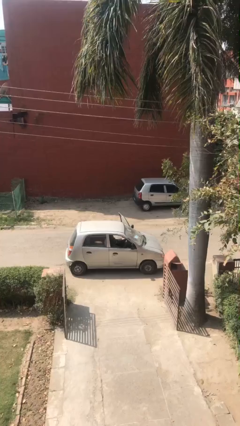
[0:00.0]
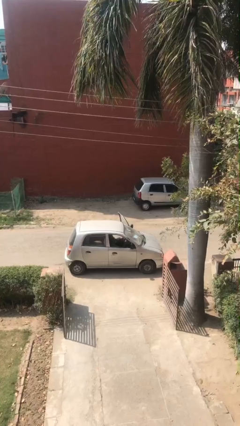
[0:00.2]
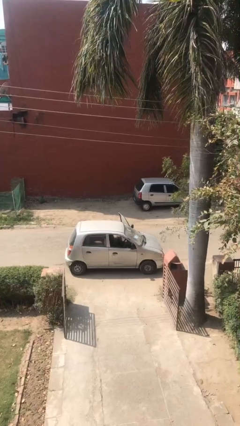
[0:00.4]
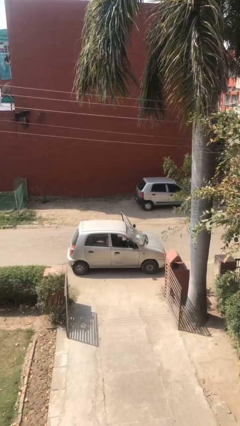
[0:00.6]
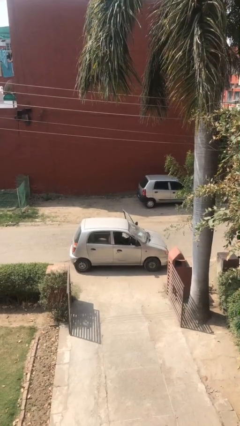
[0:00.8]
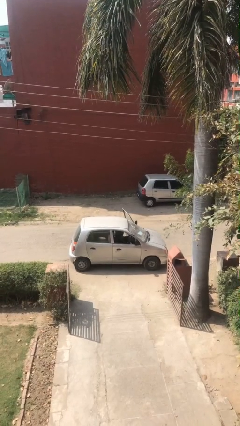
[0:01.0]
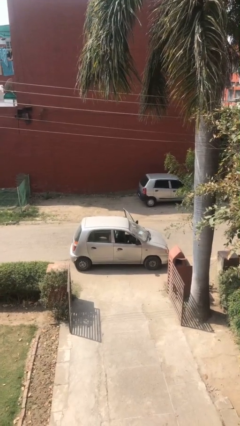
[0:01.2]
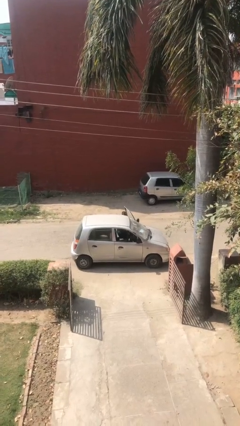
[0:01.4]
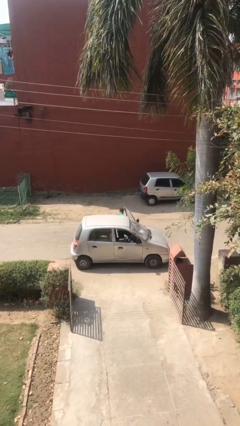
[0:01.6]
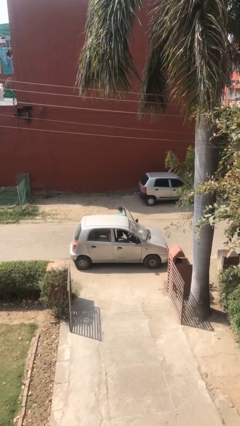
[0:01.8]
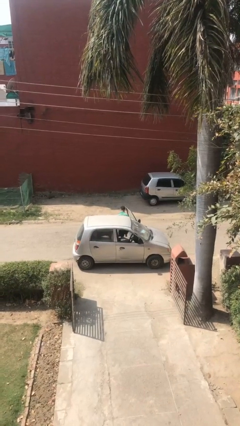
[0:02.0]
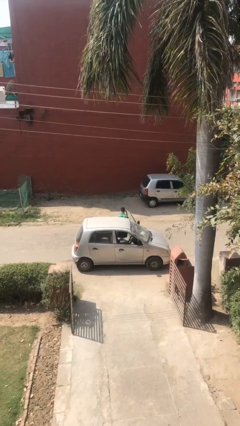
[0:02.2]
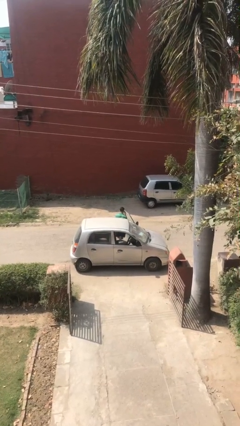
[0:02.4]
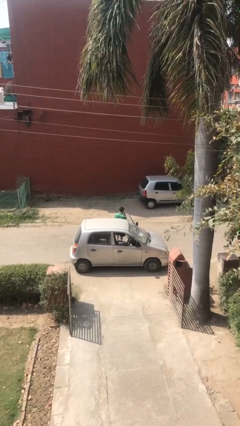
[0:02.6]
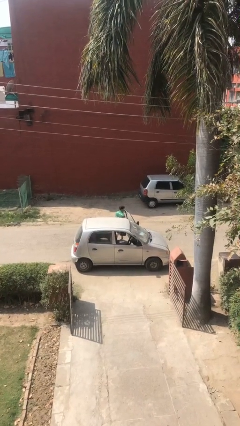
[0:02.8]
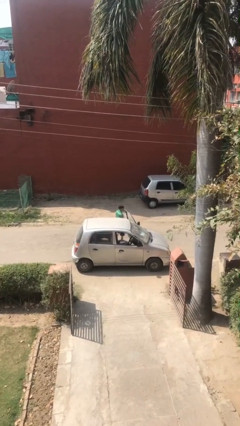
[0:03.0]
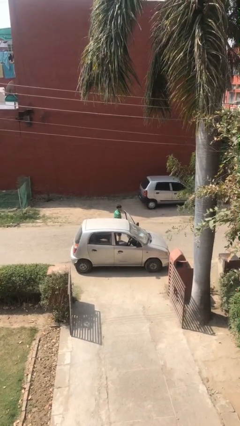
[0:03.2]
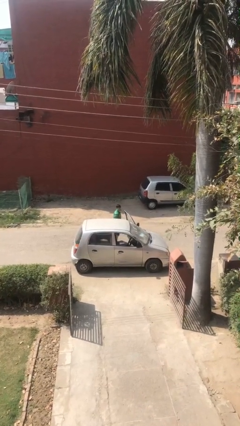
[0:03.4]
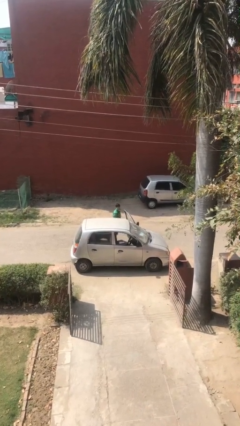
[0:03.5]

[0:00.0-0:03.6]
person exits car

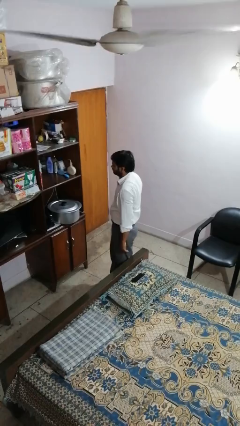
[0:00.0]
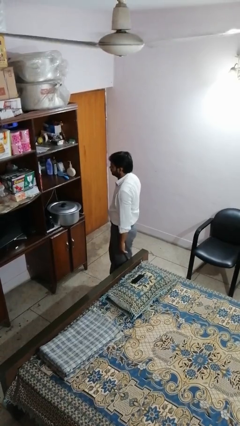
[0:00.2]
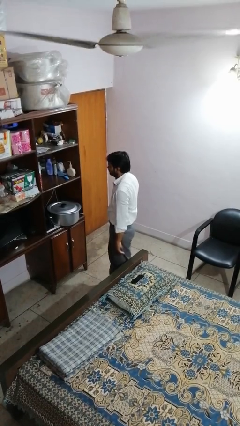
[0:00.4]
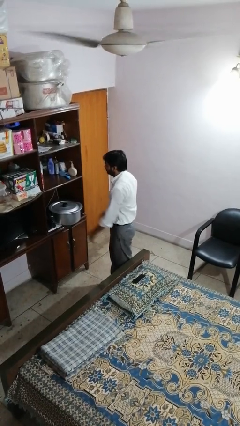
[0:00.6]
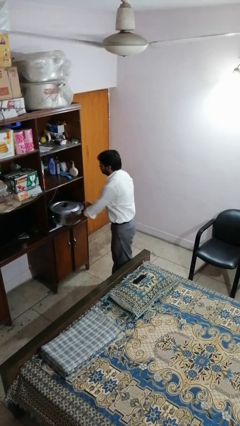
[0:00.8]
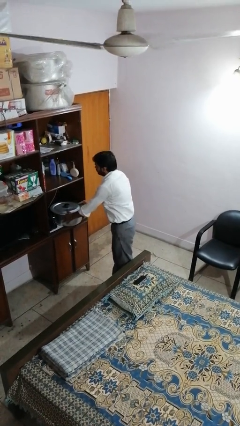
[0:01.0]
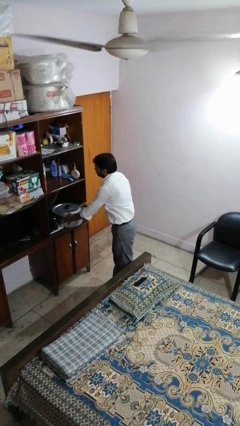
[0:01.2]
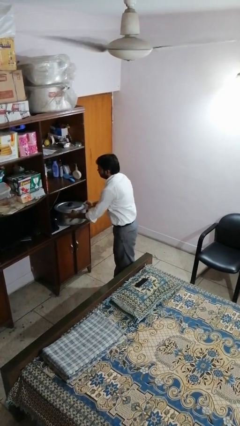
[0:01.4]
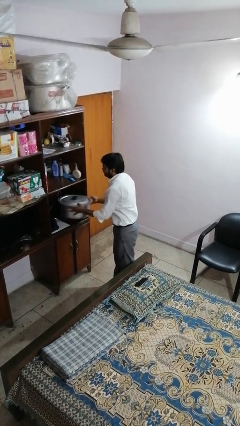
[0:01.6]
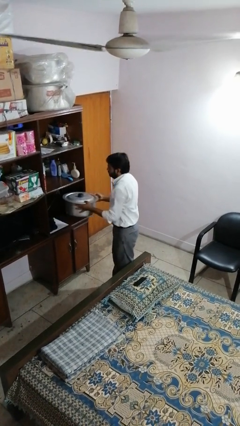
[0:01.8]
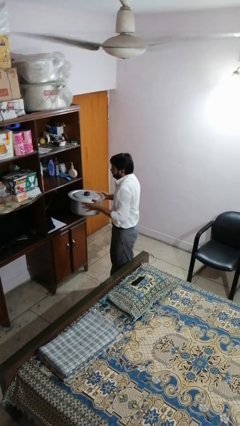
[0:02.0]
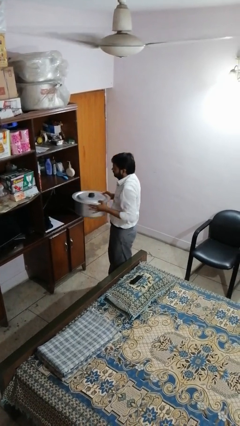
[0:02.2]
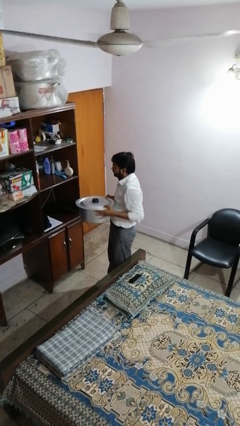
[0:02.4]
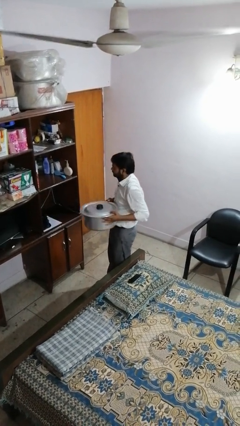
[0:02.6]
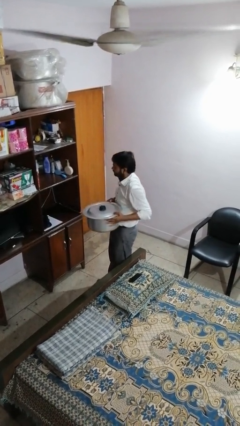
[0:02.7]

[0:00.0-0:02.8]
person picks up object from shelf

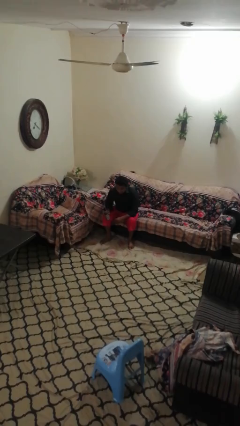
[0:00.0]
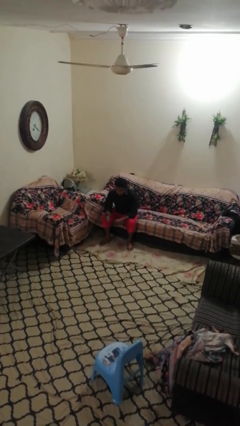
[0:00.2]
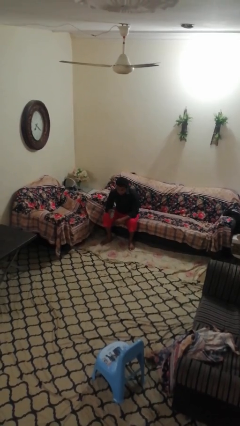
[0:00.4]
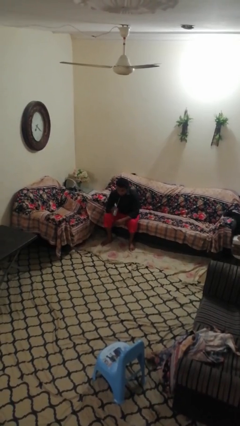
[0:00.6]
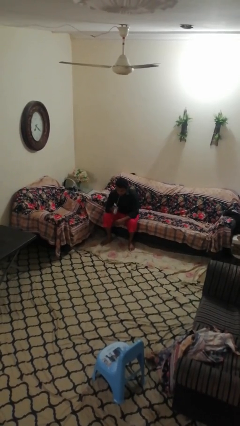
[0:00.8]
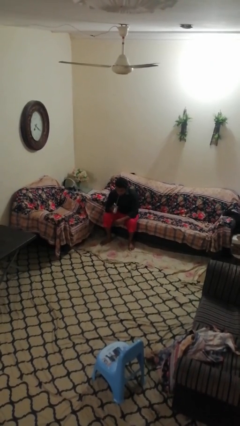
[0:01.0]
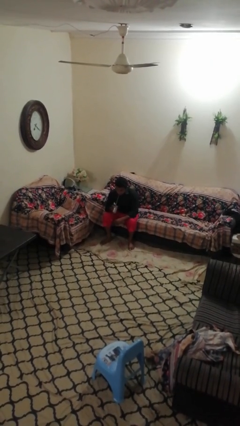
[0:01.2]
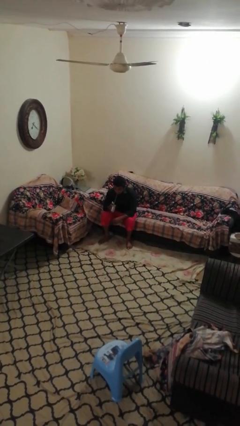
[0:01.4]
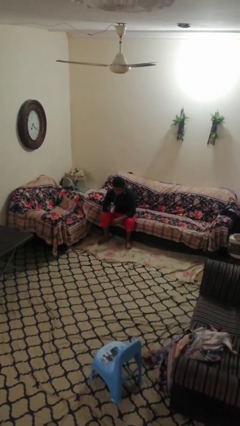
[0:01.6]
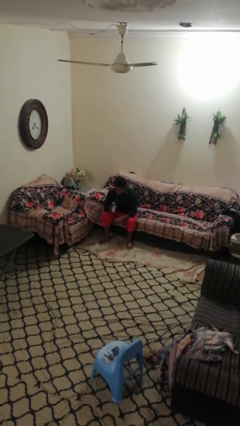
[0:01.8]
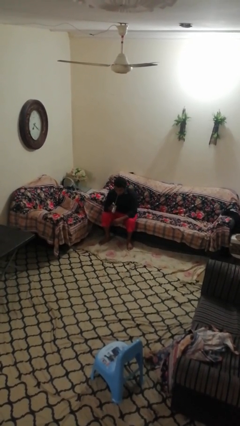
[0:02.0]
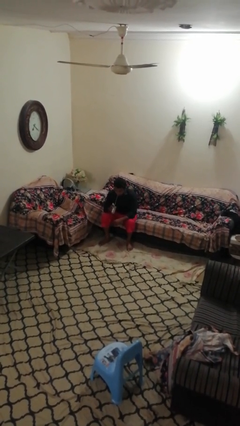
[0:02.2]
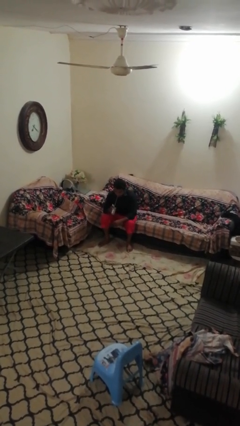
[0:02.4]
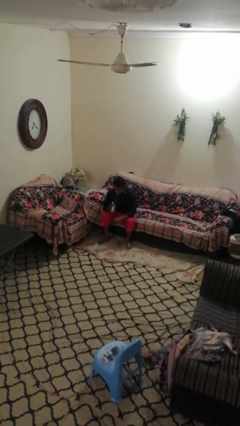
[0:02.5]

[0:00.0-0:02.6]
person drinks from straw

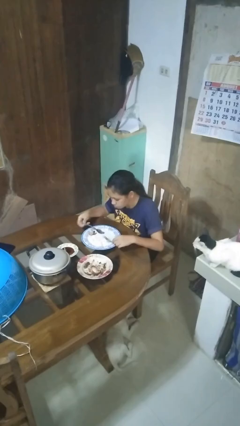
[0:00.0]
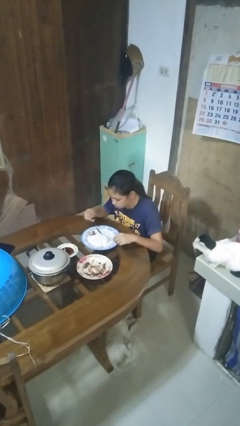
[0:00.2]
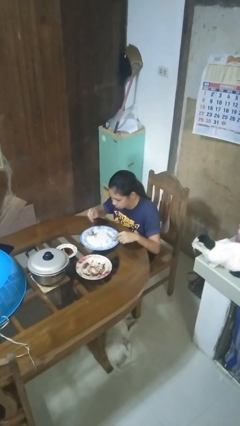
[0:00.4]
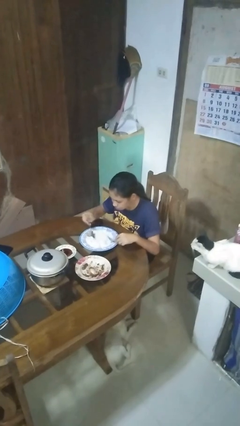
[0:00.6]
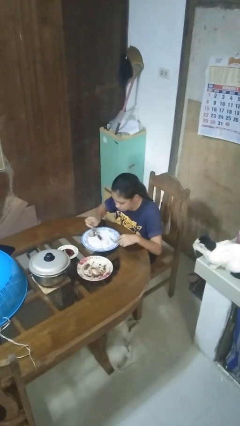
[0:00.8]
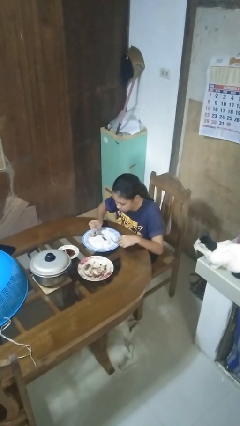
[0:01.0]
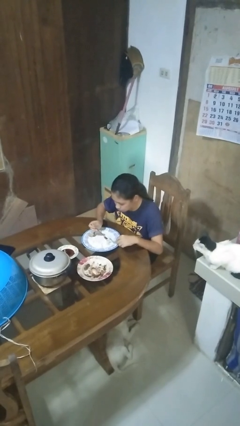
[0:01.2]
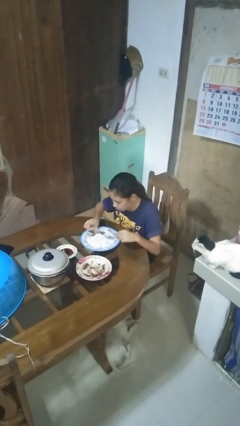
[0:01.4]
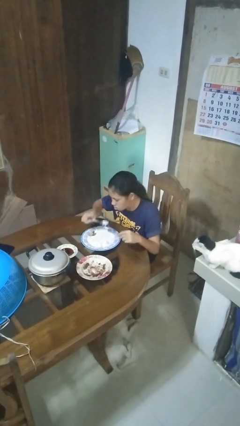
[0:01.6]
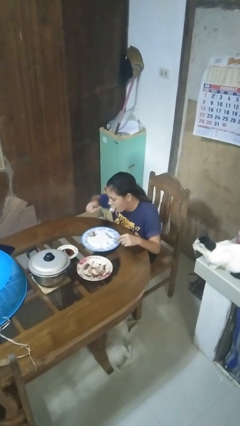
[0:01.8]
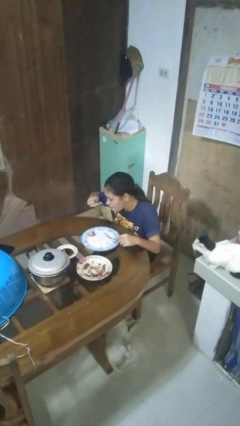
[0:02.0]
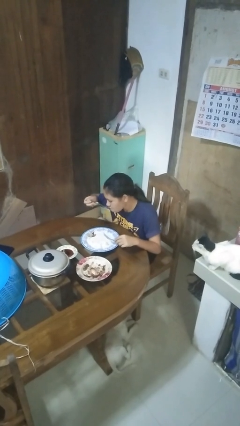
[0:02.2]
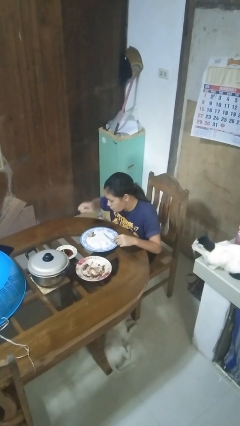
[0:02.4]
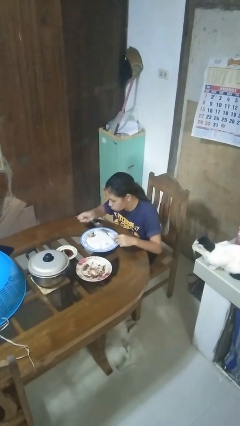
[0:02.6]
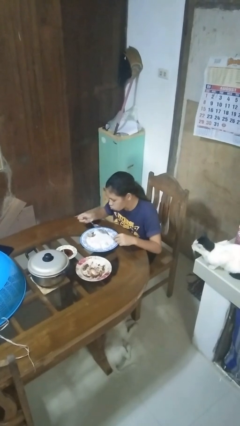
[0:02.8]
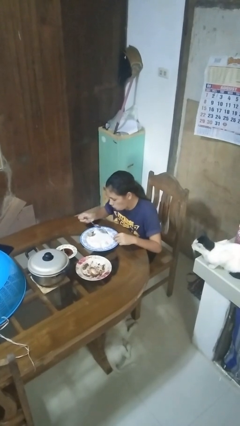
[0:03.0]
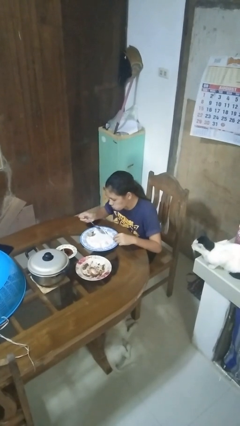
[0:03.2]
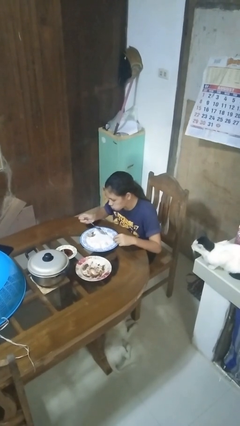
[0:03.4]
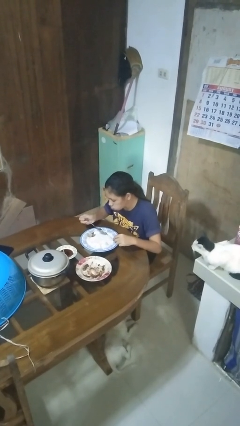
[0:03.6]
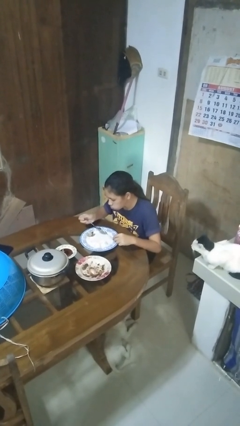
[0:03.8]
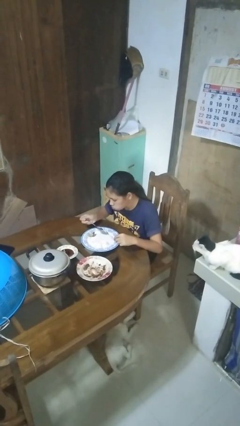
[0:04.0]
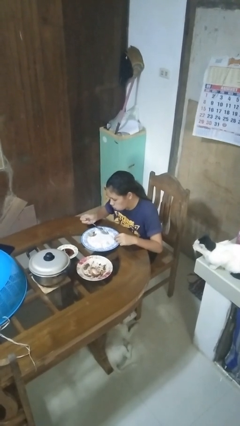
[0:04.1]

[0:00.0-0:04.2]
person eats with utensil

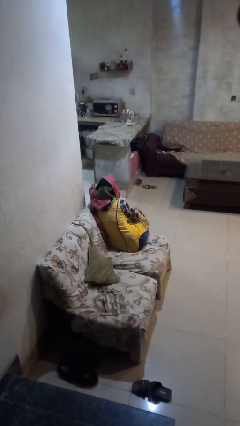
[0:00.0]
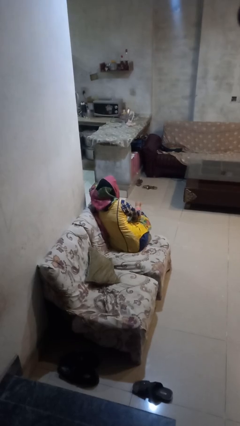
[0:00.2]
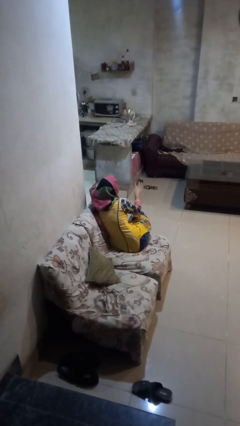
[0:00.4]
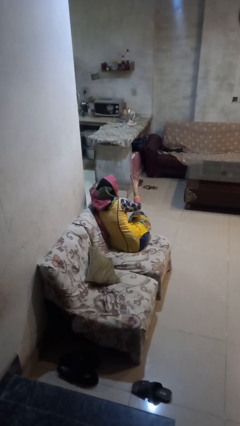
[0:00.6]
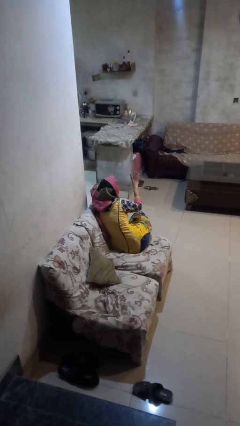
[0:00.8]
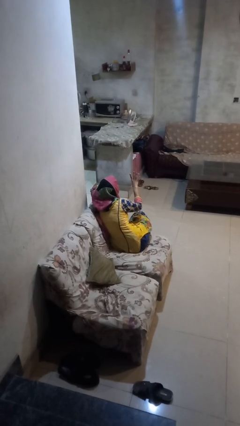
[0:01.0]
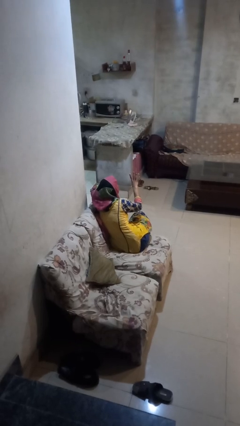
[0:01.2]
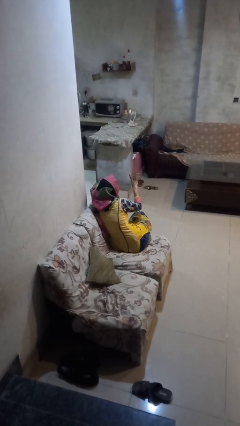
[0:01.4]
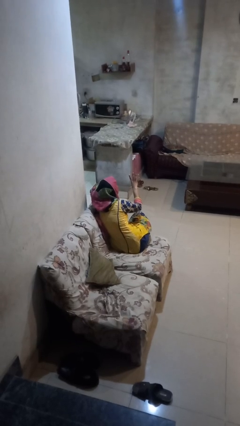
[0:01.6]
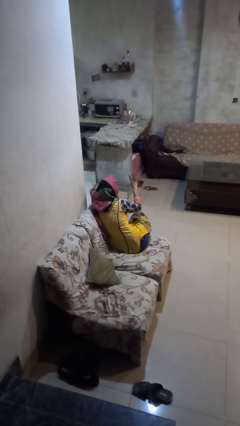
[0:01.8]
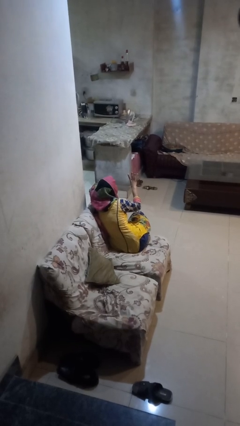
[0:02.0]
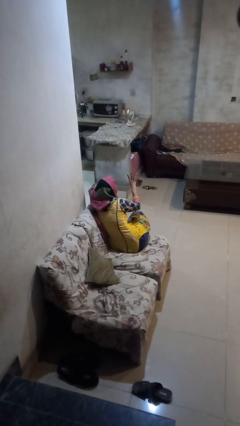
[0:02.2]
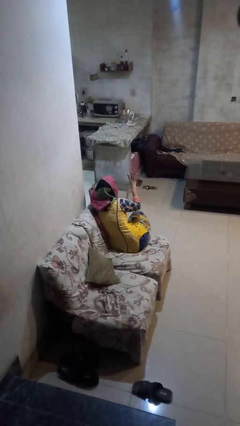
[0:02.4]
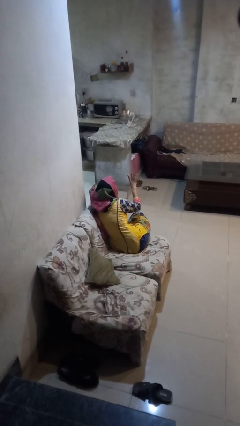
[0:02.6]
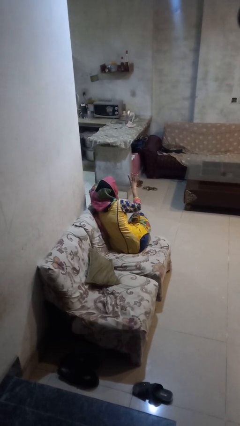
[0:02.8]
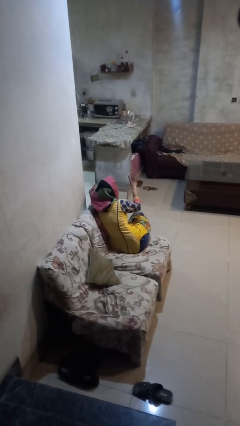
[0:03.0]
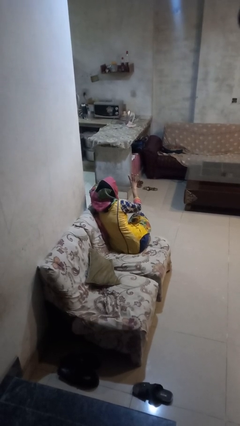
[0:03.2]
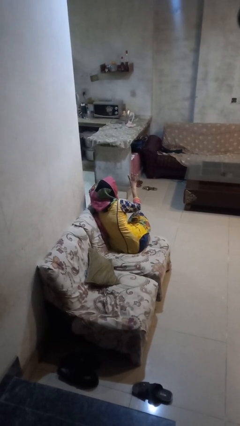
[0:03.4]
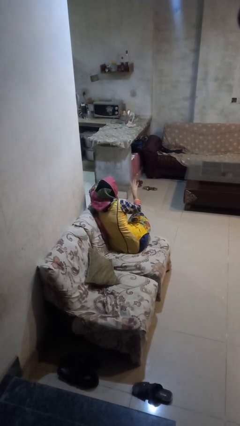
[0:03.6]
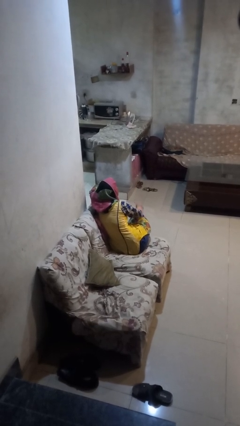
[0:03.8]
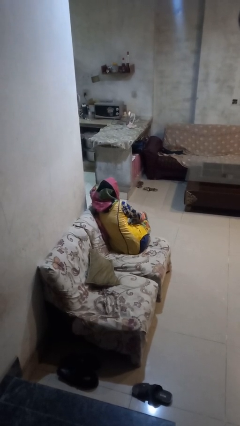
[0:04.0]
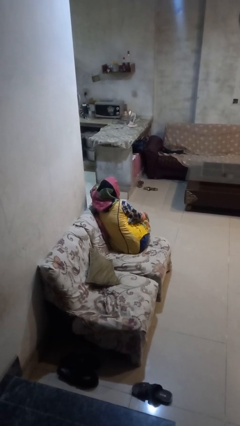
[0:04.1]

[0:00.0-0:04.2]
person gestures number four
